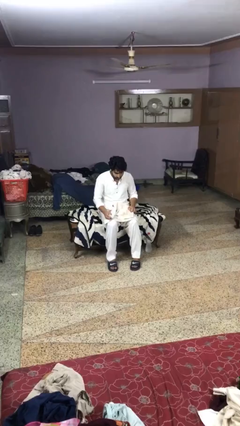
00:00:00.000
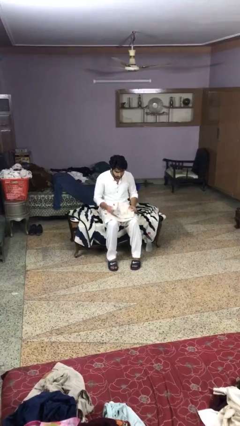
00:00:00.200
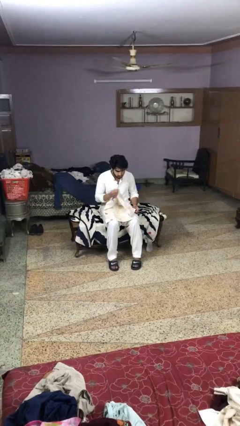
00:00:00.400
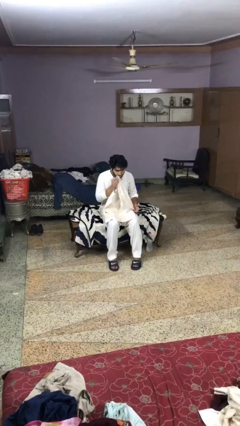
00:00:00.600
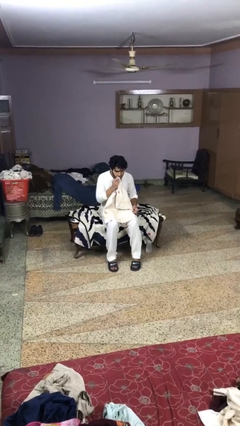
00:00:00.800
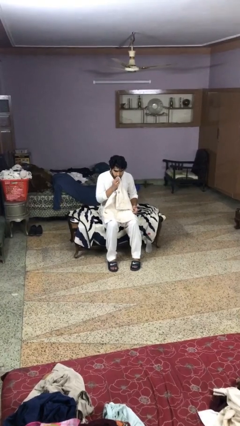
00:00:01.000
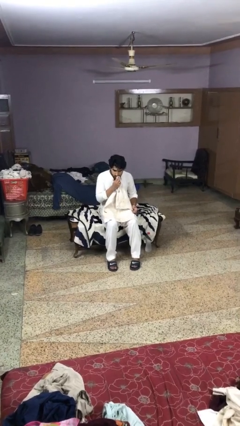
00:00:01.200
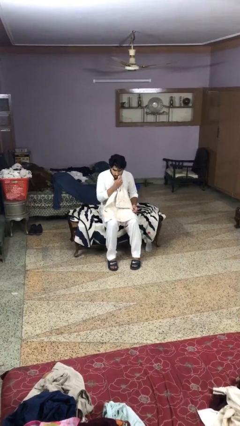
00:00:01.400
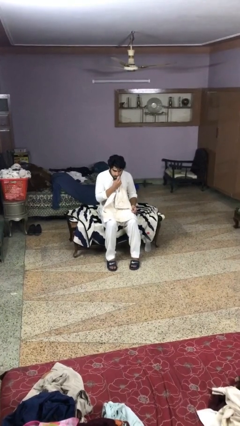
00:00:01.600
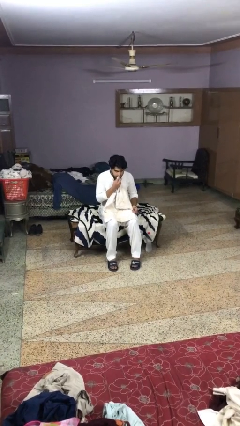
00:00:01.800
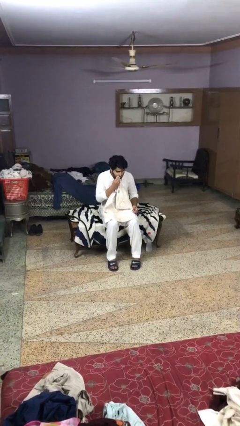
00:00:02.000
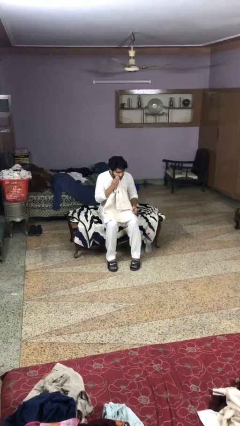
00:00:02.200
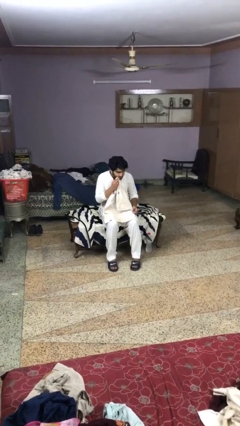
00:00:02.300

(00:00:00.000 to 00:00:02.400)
person wipes mouth with napkin

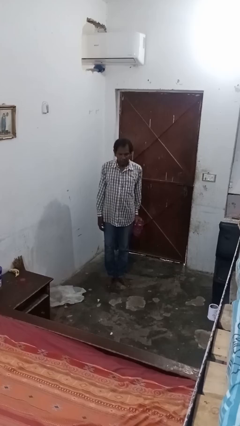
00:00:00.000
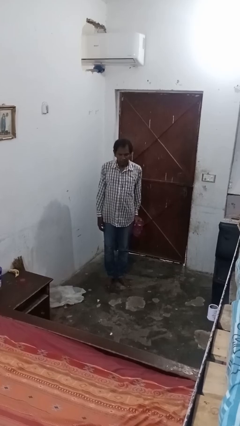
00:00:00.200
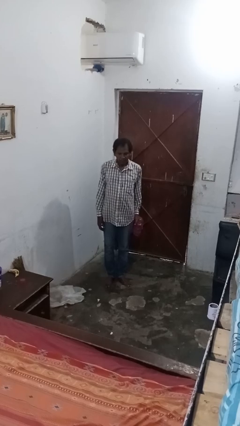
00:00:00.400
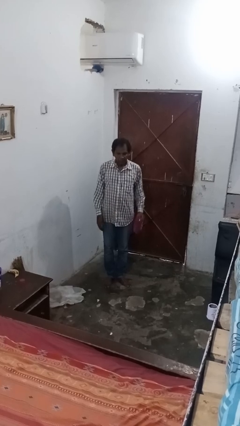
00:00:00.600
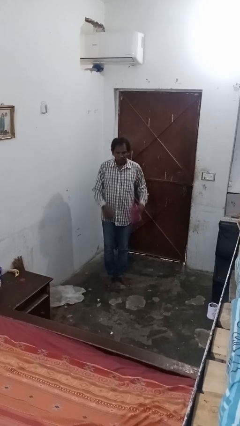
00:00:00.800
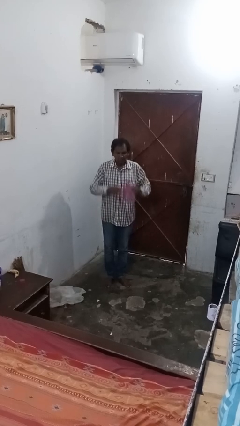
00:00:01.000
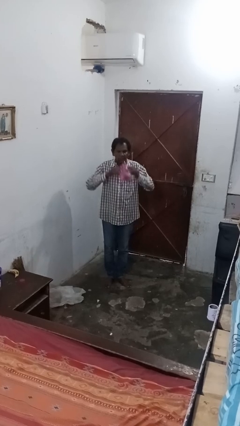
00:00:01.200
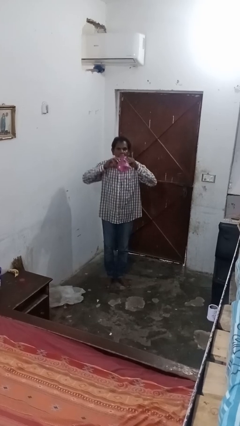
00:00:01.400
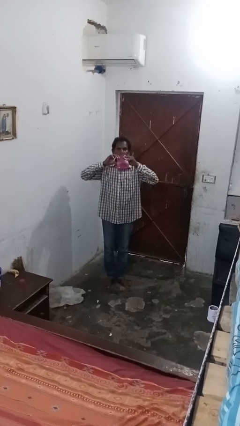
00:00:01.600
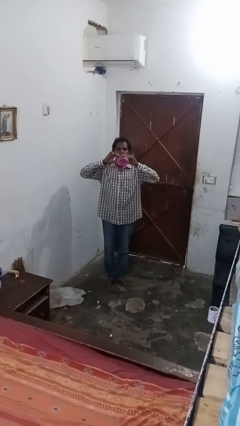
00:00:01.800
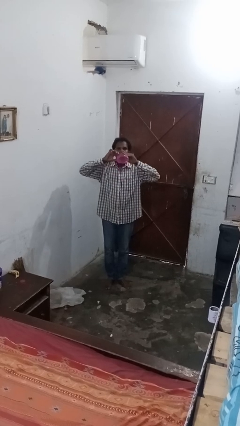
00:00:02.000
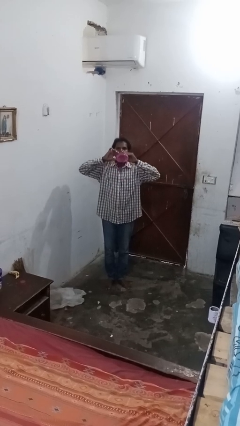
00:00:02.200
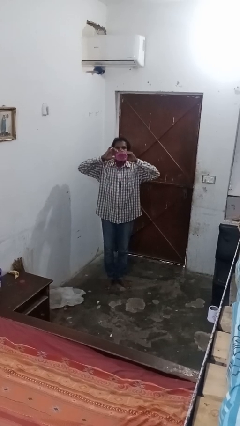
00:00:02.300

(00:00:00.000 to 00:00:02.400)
person drinks from bottle

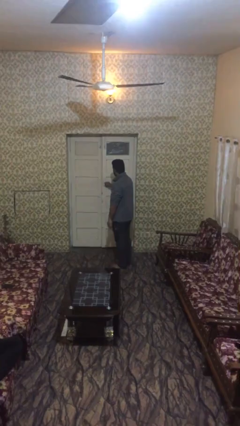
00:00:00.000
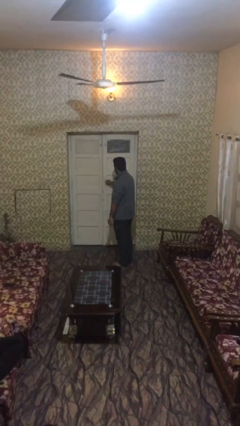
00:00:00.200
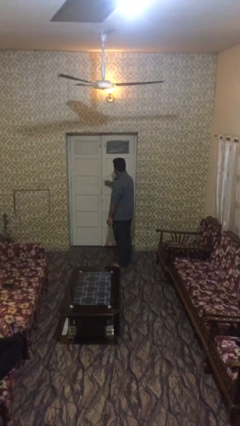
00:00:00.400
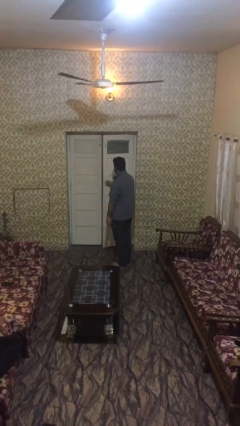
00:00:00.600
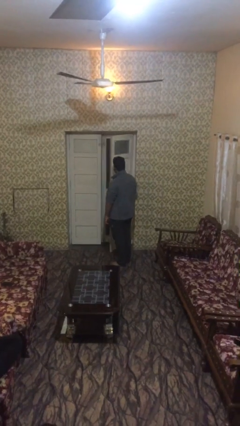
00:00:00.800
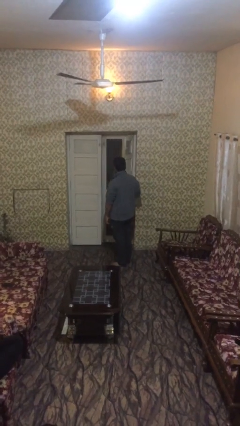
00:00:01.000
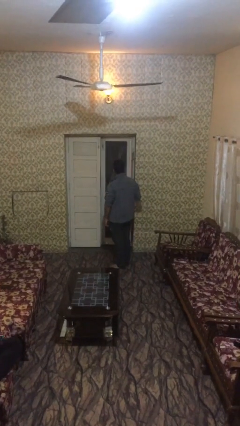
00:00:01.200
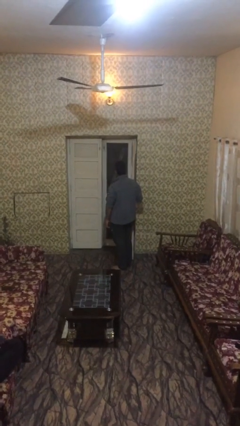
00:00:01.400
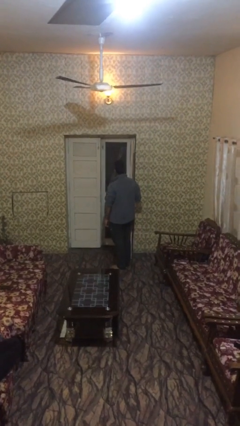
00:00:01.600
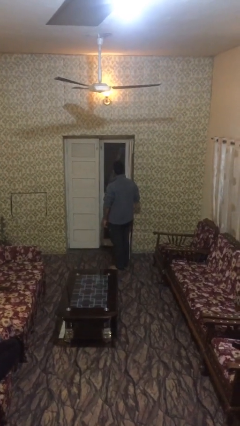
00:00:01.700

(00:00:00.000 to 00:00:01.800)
person opens facility door

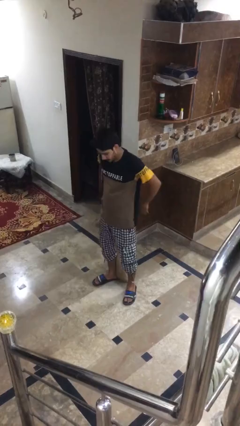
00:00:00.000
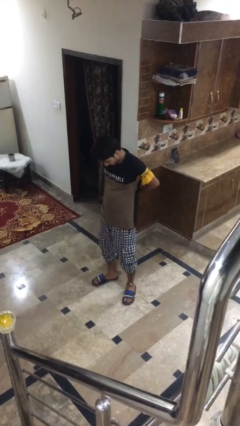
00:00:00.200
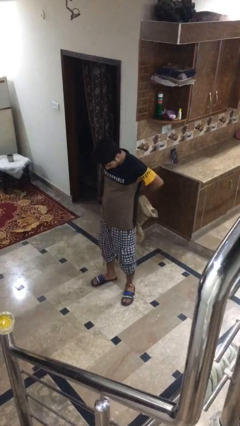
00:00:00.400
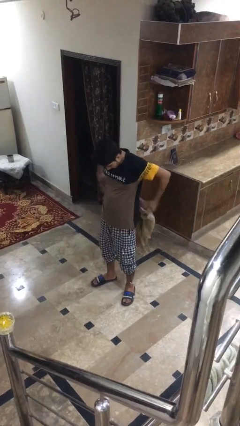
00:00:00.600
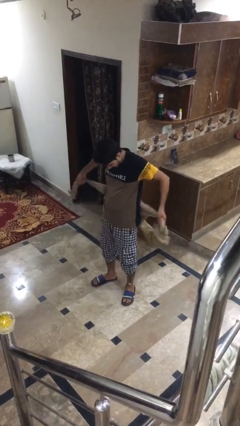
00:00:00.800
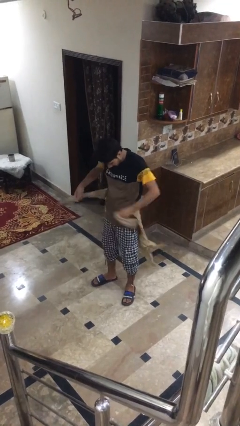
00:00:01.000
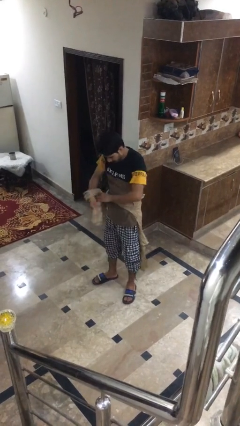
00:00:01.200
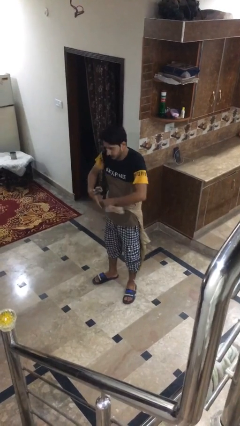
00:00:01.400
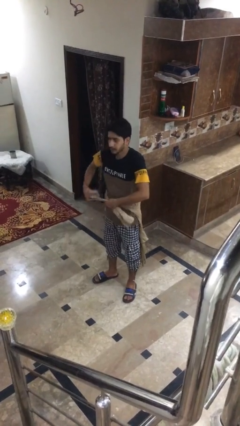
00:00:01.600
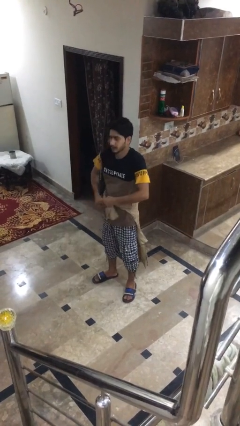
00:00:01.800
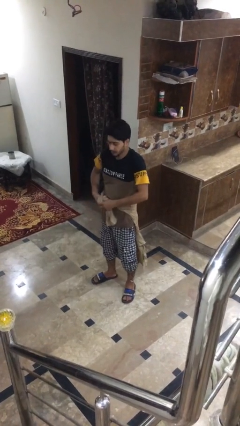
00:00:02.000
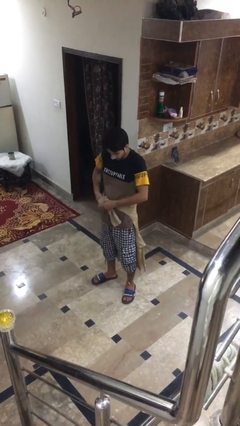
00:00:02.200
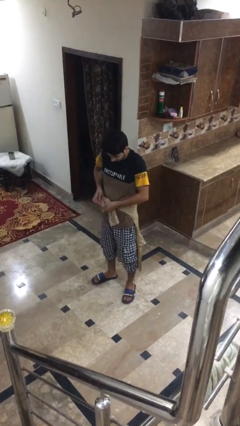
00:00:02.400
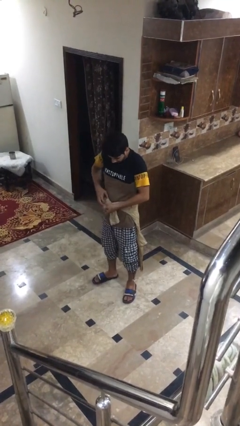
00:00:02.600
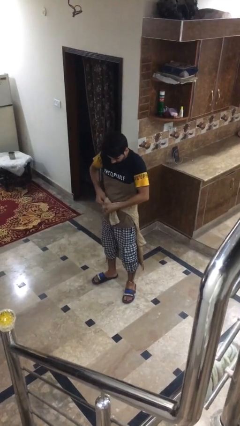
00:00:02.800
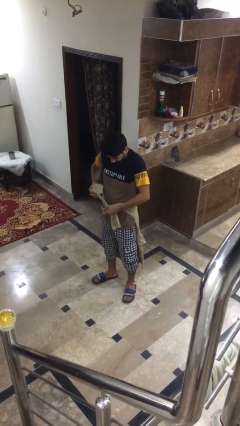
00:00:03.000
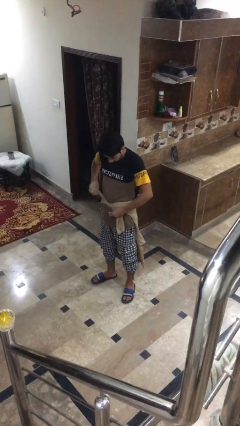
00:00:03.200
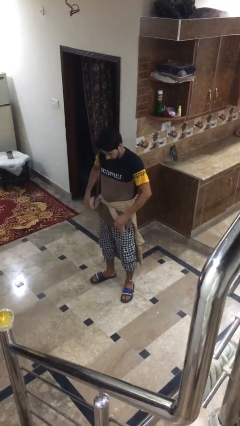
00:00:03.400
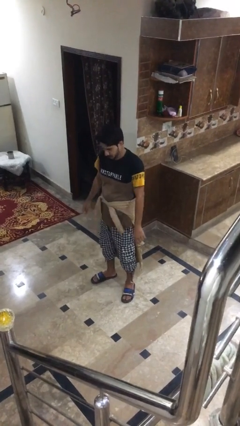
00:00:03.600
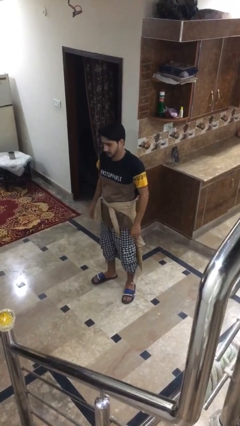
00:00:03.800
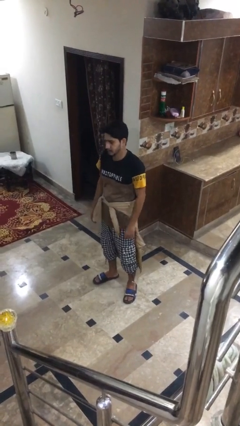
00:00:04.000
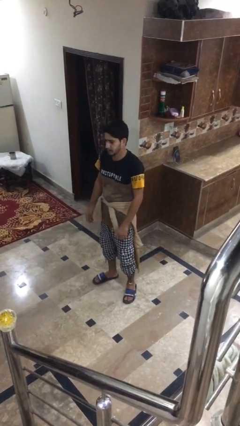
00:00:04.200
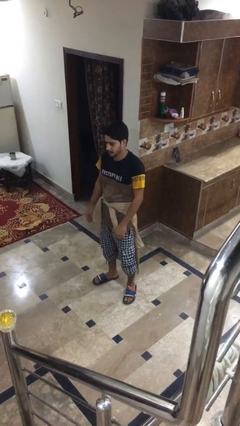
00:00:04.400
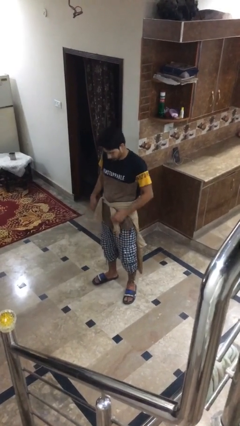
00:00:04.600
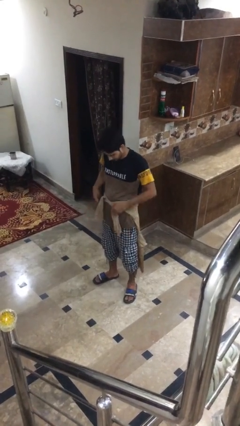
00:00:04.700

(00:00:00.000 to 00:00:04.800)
person ties jacket around waist

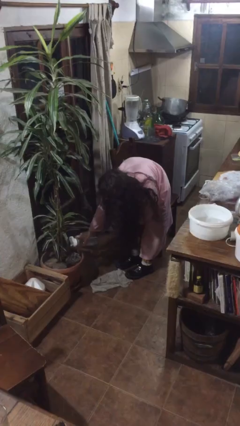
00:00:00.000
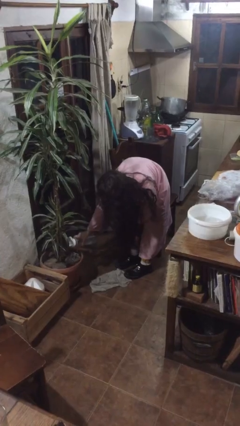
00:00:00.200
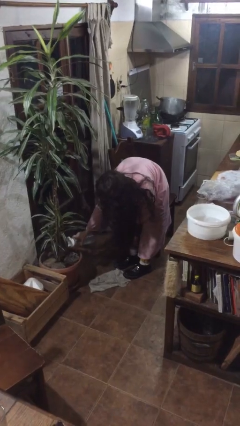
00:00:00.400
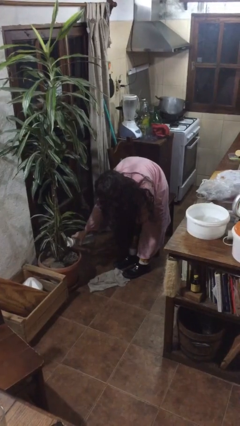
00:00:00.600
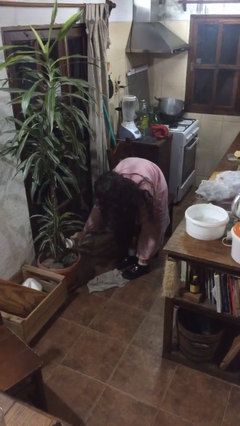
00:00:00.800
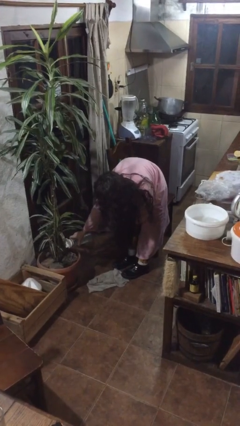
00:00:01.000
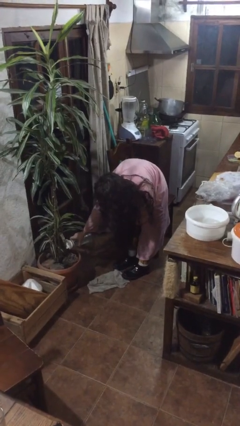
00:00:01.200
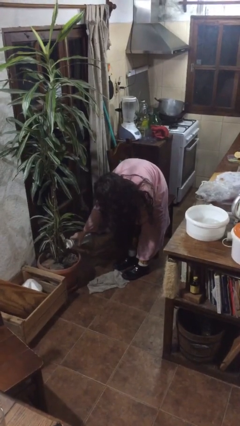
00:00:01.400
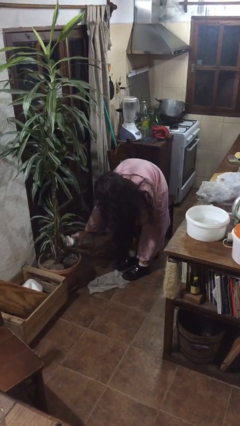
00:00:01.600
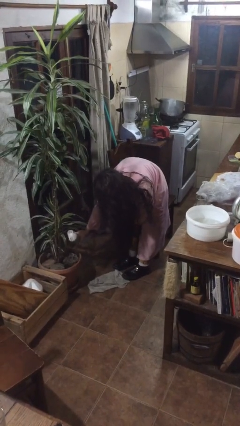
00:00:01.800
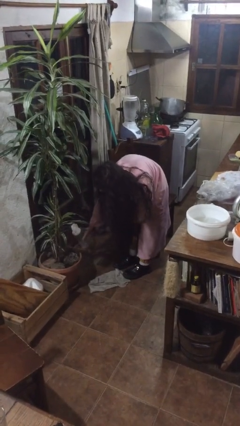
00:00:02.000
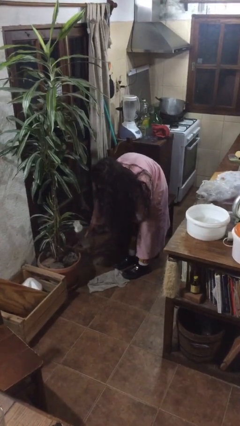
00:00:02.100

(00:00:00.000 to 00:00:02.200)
person waters houseplant

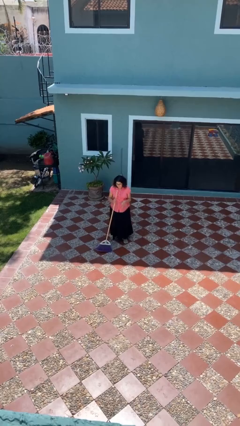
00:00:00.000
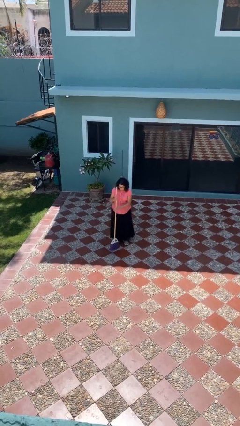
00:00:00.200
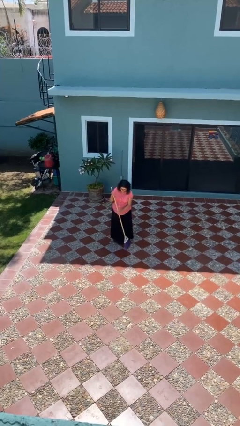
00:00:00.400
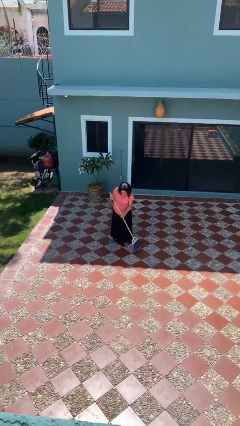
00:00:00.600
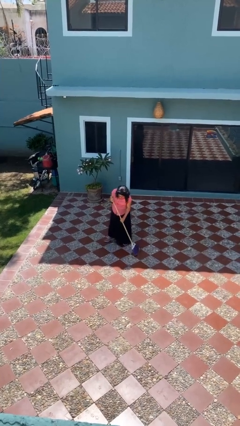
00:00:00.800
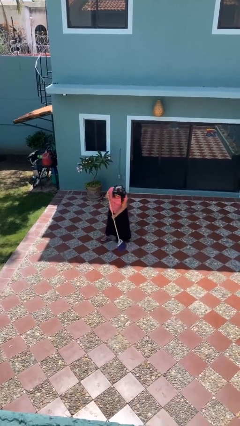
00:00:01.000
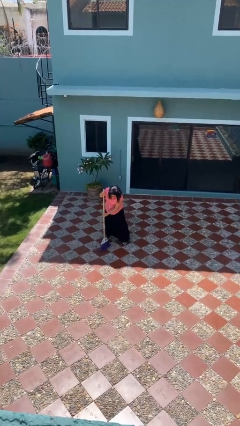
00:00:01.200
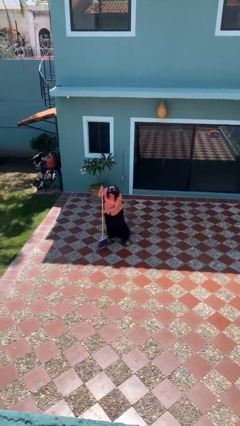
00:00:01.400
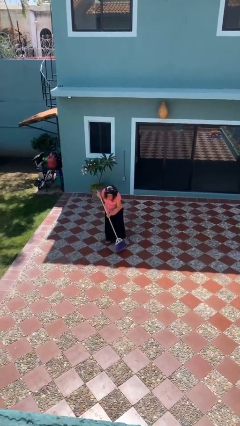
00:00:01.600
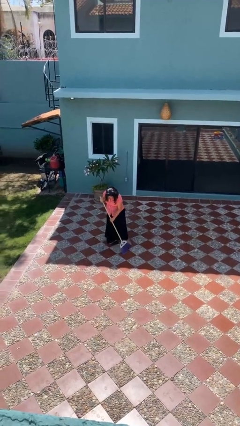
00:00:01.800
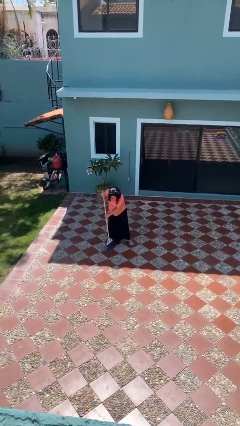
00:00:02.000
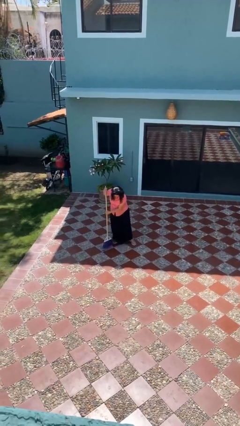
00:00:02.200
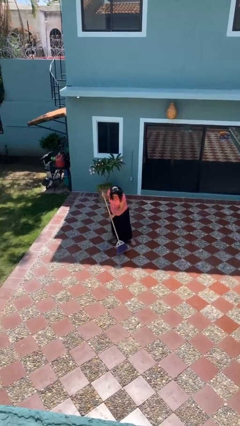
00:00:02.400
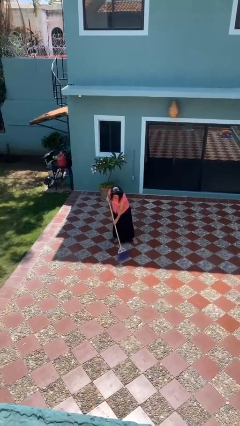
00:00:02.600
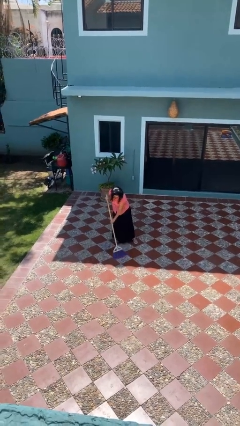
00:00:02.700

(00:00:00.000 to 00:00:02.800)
person sweeps floor

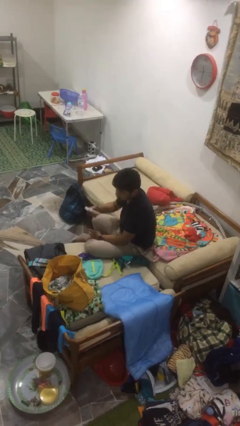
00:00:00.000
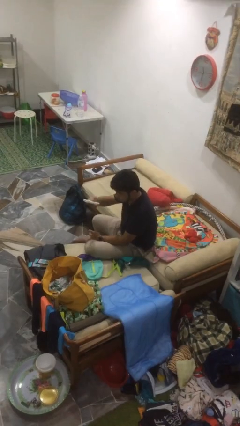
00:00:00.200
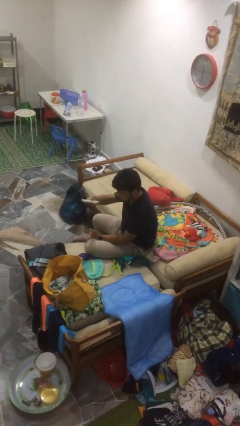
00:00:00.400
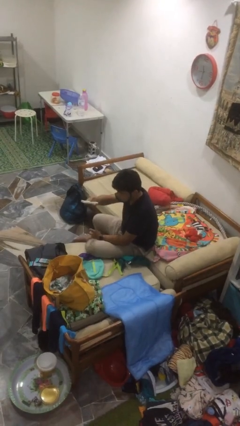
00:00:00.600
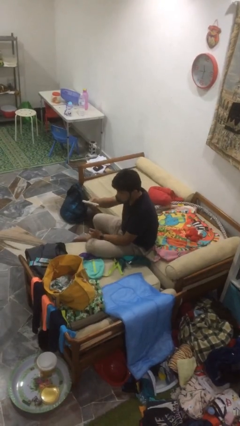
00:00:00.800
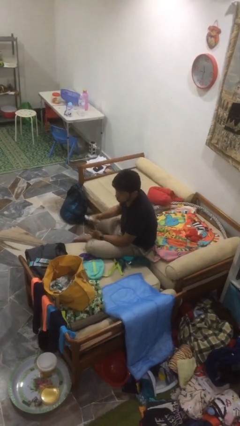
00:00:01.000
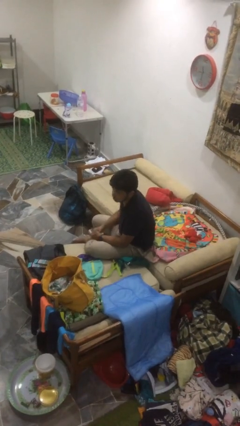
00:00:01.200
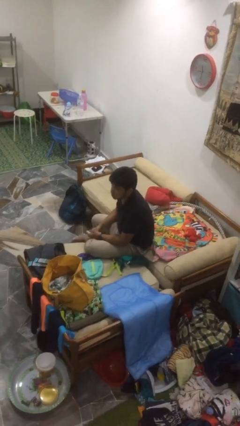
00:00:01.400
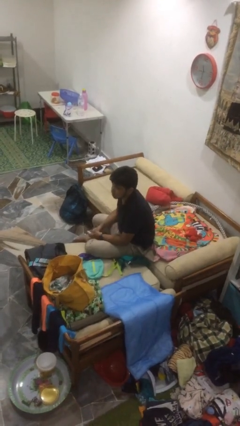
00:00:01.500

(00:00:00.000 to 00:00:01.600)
person uses television remote
